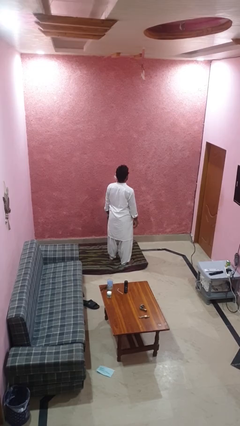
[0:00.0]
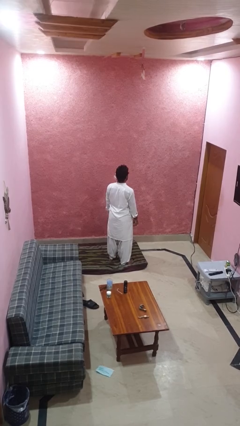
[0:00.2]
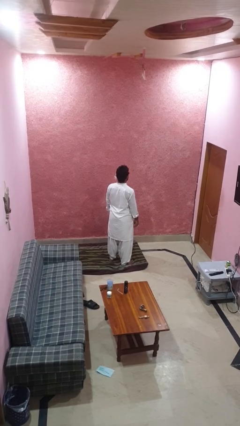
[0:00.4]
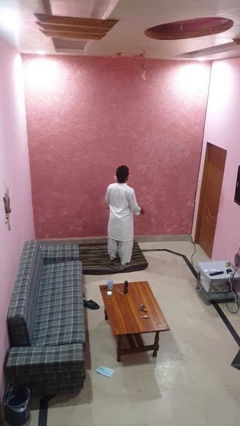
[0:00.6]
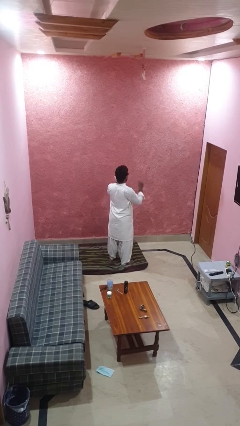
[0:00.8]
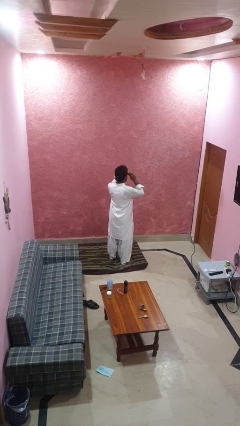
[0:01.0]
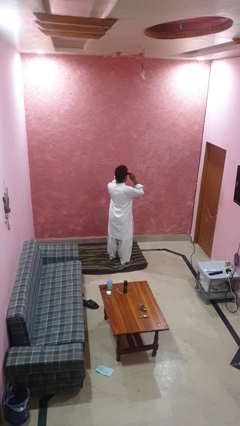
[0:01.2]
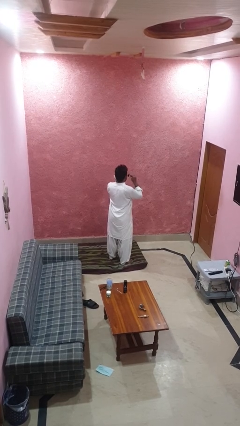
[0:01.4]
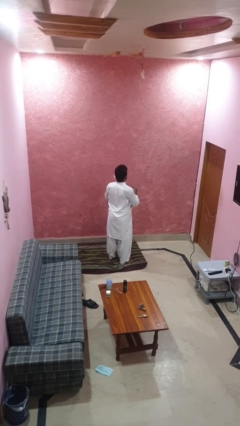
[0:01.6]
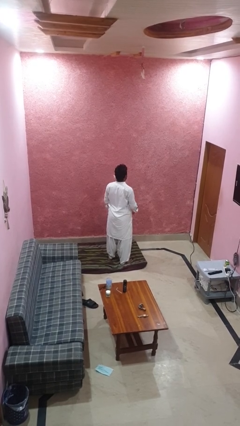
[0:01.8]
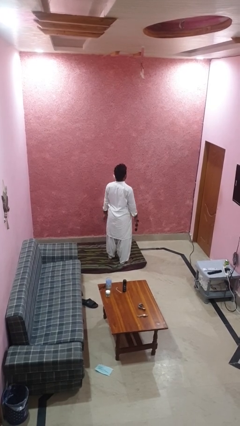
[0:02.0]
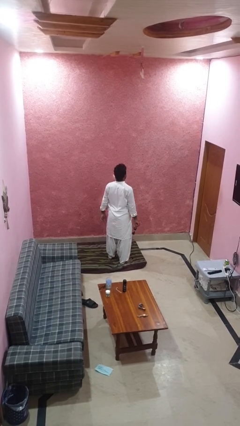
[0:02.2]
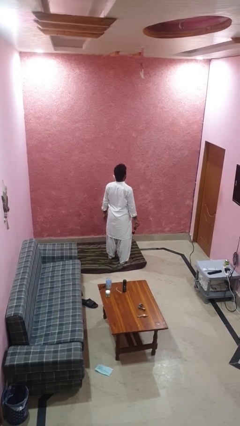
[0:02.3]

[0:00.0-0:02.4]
person takes off sunglasses

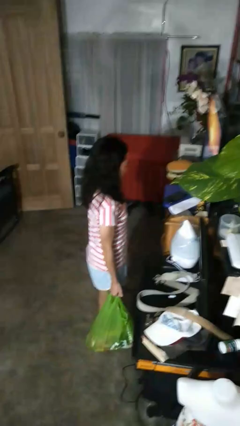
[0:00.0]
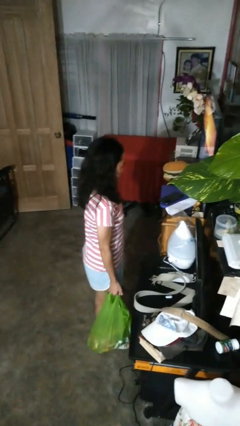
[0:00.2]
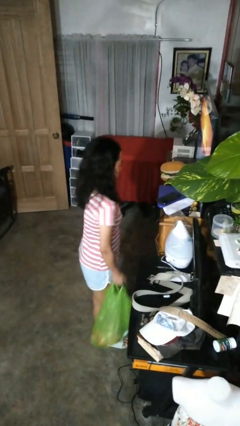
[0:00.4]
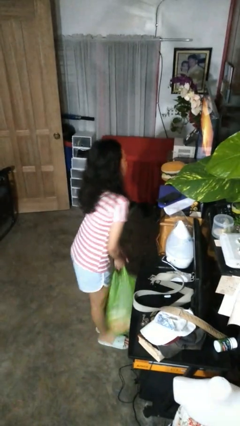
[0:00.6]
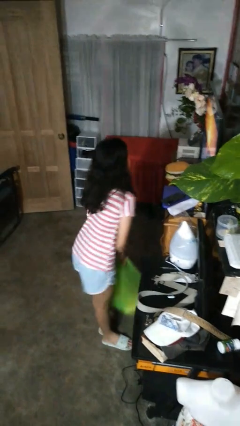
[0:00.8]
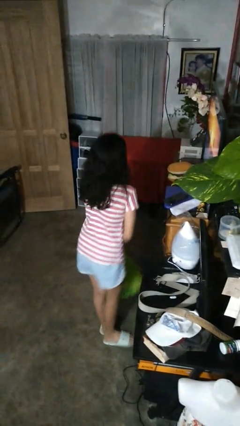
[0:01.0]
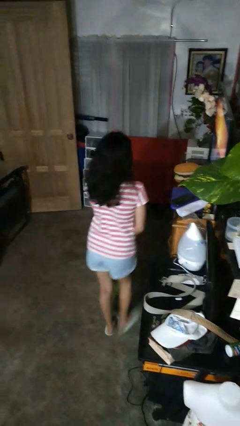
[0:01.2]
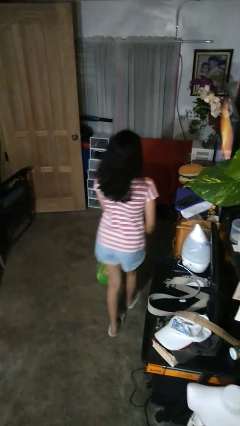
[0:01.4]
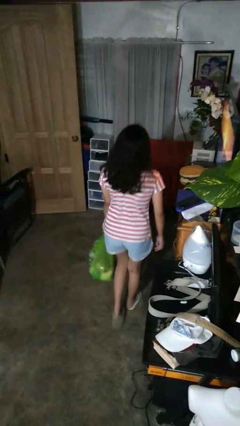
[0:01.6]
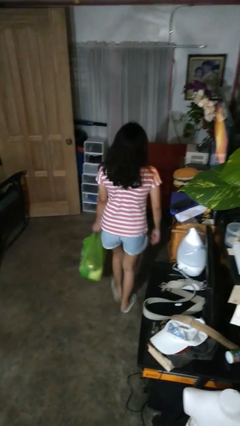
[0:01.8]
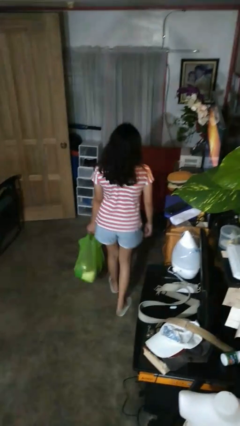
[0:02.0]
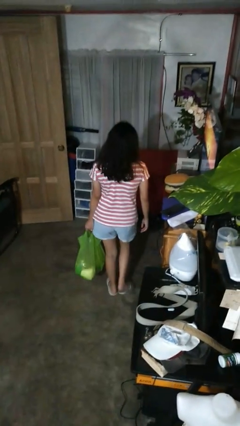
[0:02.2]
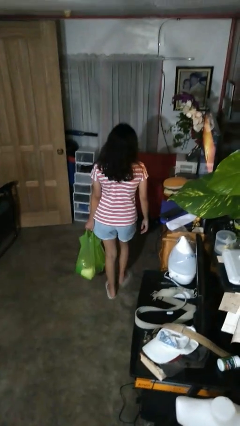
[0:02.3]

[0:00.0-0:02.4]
person carries groceries

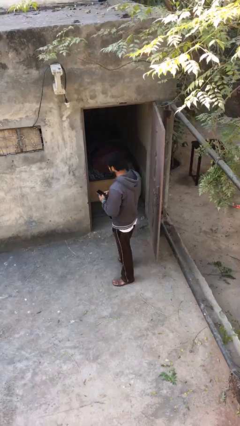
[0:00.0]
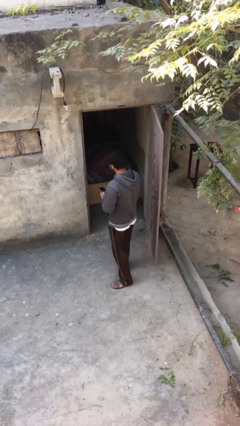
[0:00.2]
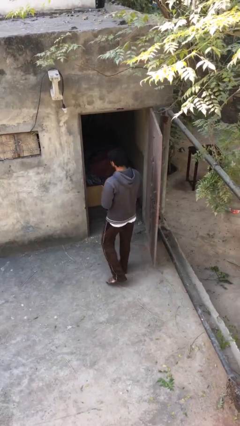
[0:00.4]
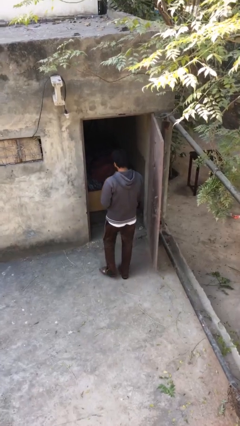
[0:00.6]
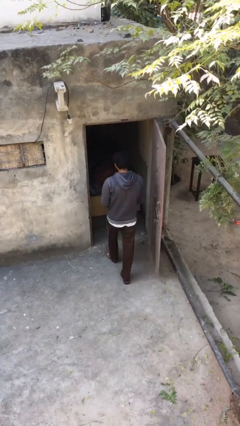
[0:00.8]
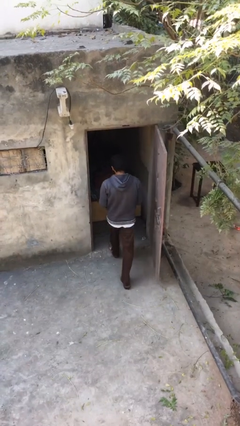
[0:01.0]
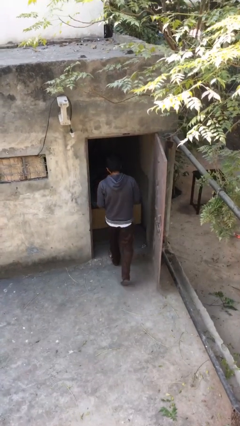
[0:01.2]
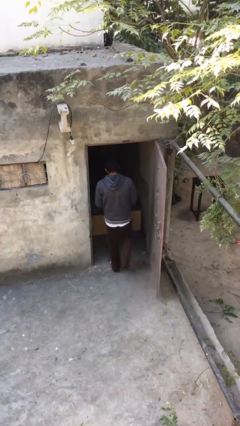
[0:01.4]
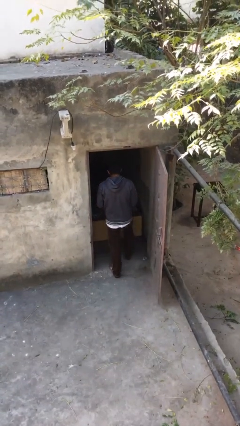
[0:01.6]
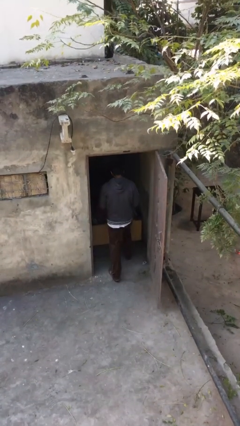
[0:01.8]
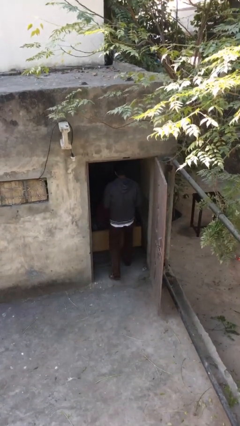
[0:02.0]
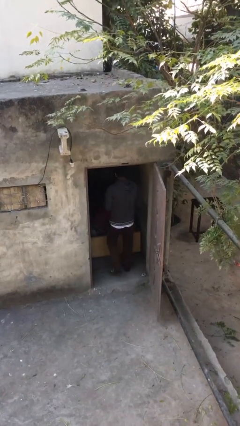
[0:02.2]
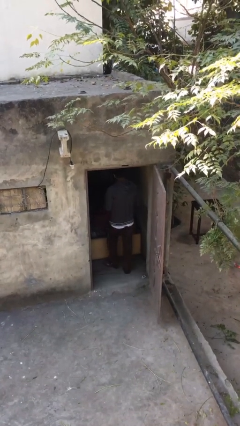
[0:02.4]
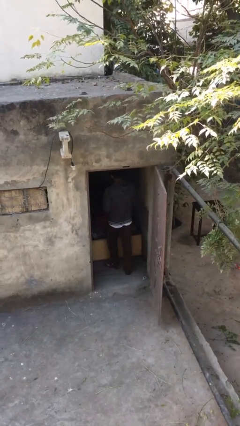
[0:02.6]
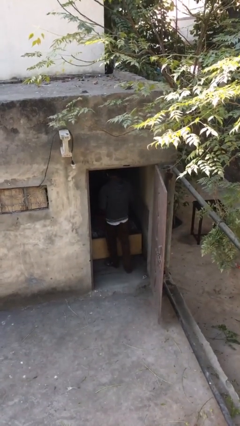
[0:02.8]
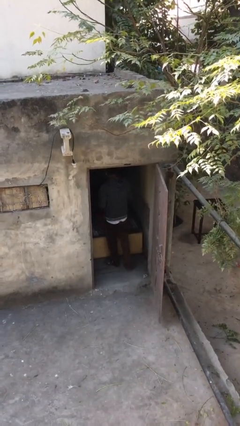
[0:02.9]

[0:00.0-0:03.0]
person exits scene through structure

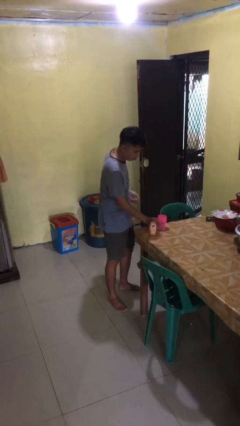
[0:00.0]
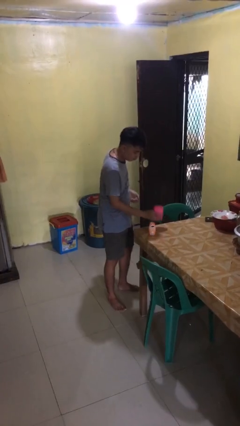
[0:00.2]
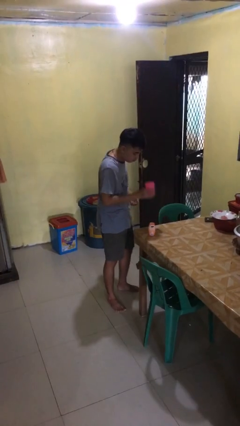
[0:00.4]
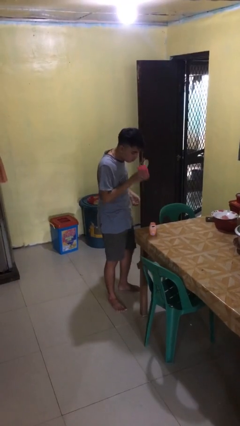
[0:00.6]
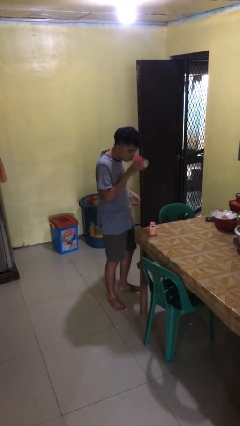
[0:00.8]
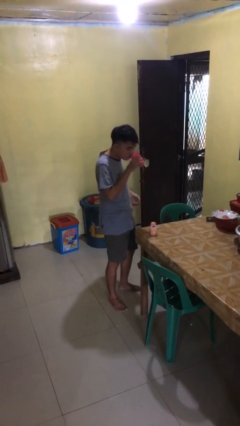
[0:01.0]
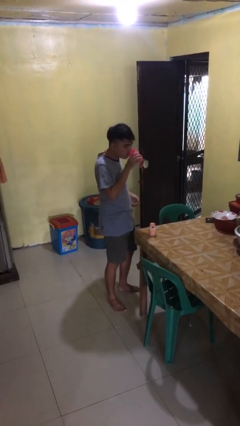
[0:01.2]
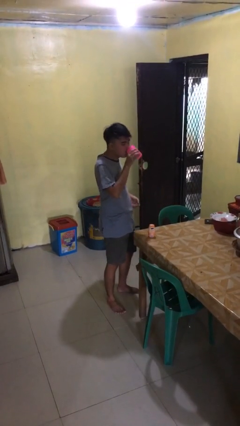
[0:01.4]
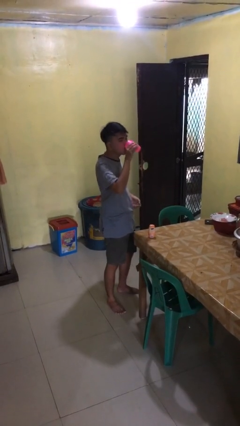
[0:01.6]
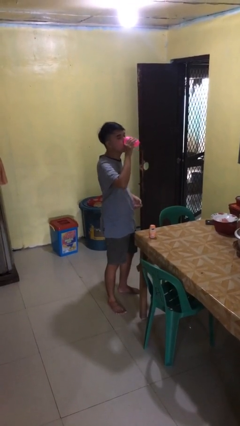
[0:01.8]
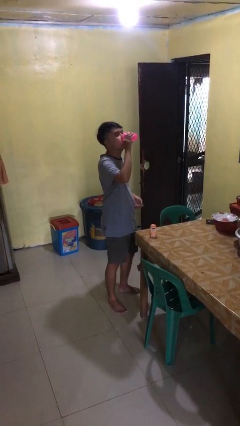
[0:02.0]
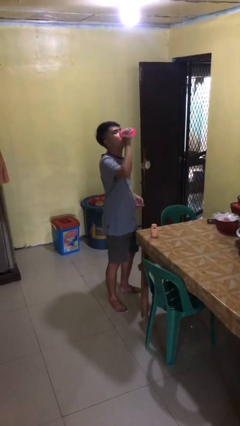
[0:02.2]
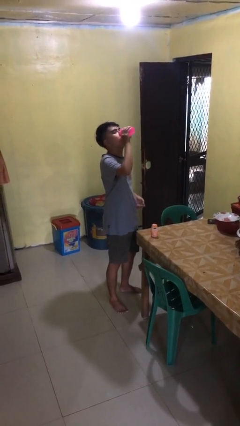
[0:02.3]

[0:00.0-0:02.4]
person drinks from cup

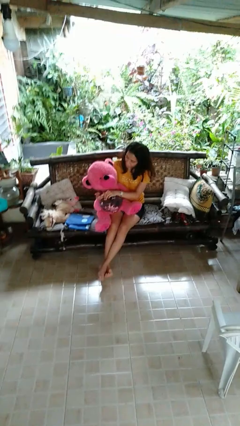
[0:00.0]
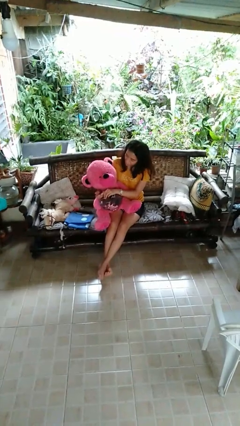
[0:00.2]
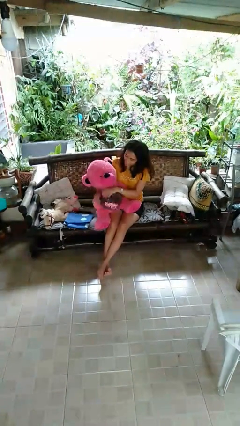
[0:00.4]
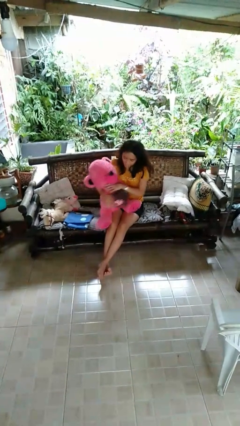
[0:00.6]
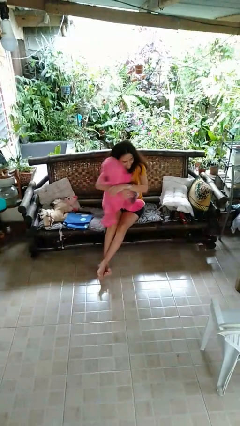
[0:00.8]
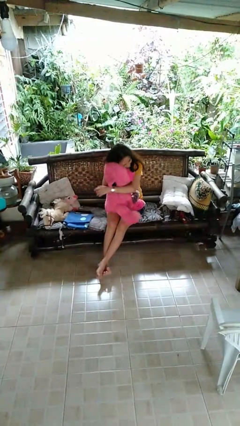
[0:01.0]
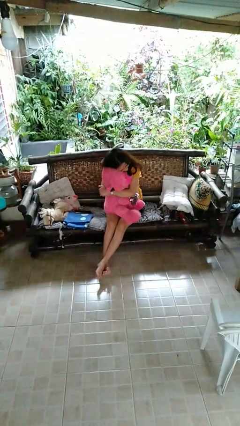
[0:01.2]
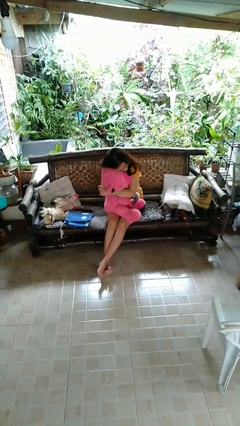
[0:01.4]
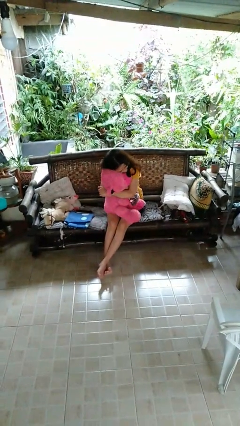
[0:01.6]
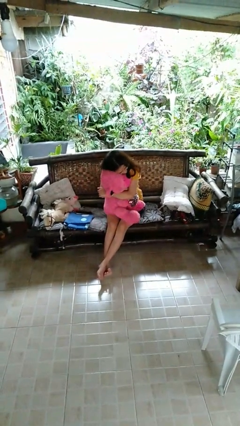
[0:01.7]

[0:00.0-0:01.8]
person hugs stuffed animal

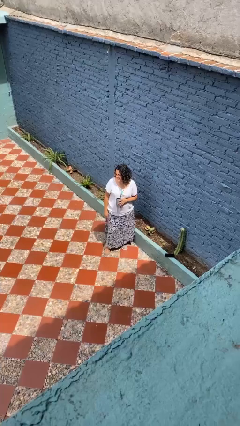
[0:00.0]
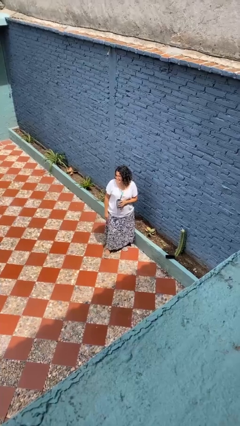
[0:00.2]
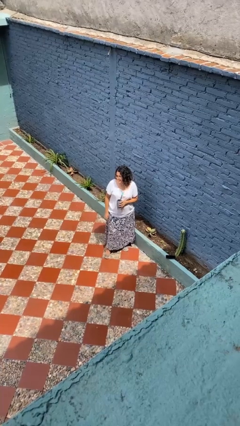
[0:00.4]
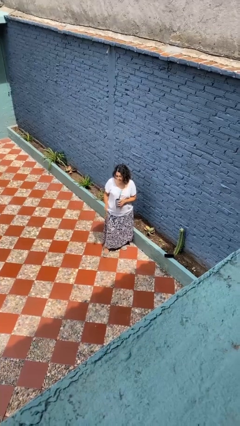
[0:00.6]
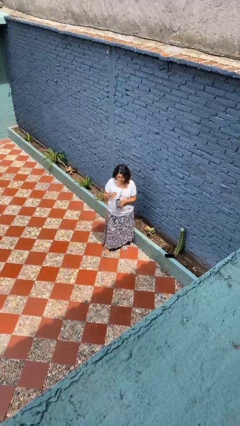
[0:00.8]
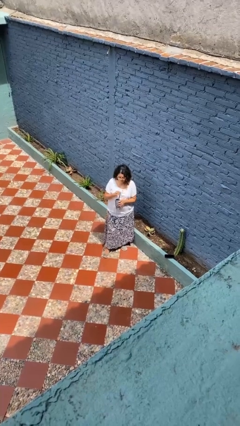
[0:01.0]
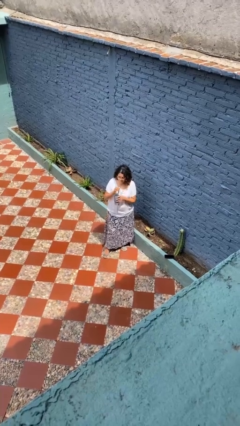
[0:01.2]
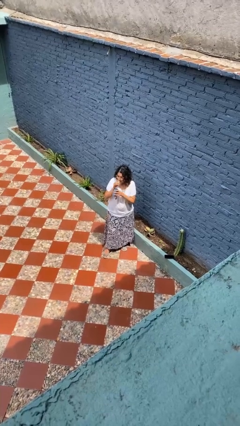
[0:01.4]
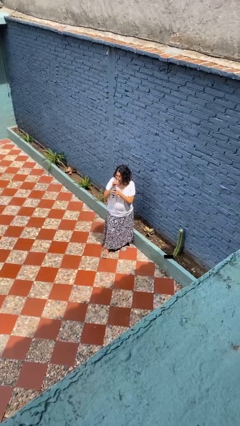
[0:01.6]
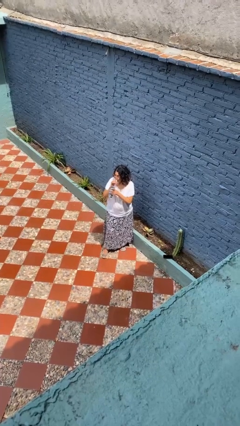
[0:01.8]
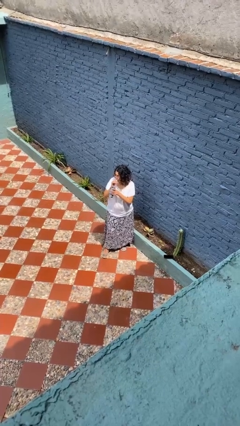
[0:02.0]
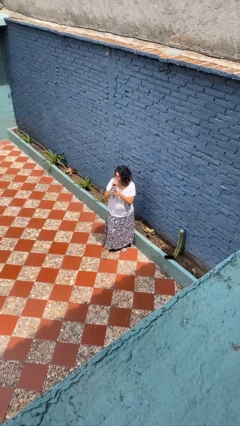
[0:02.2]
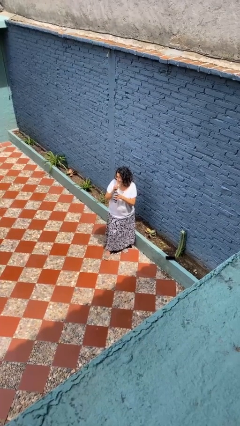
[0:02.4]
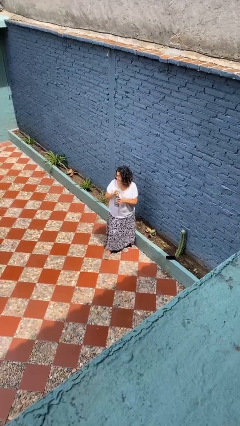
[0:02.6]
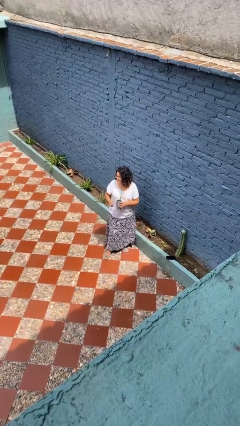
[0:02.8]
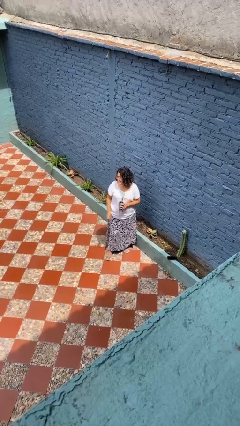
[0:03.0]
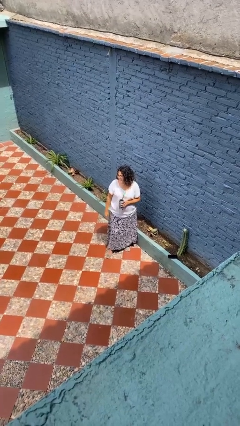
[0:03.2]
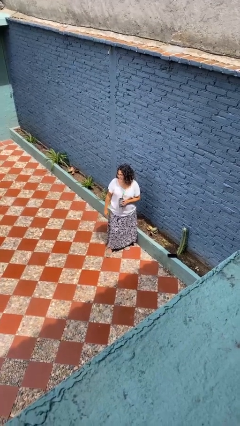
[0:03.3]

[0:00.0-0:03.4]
person drinks from straw

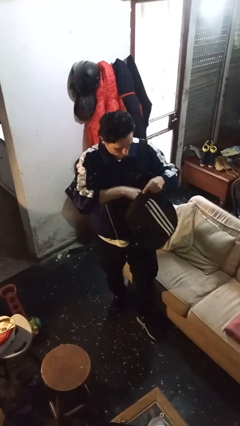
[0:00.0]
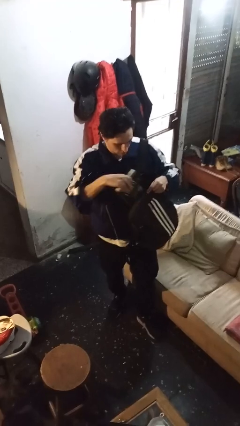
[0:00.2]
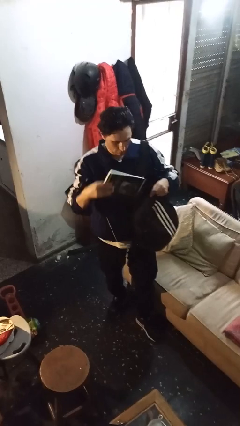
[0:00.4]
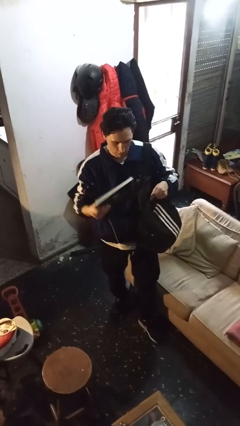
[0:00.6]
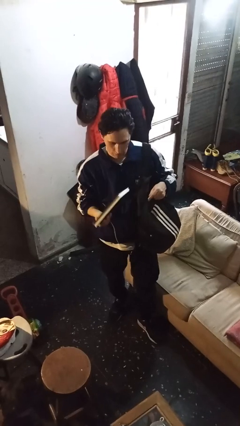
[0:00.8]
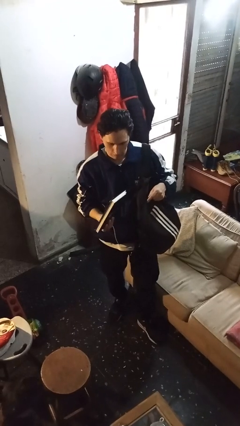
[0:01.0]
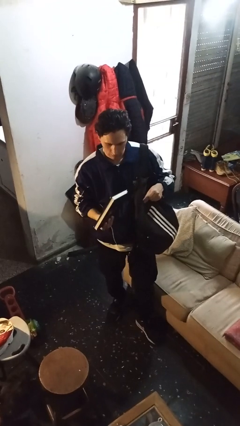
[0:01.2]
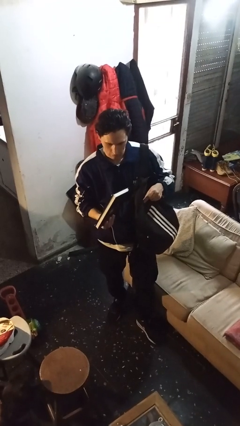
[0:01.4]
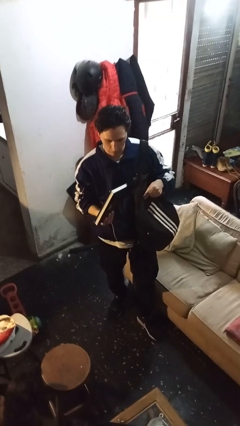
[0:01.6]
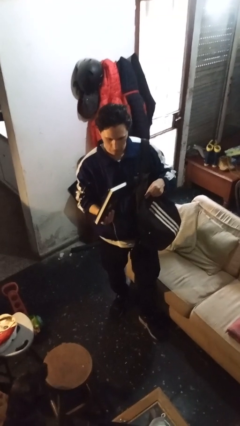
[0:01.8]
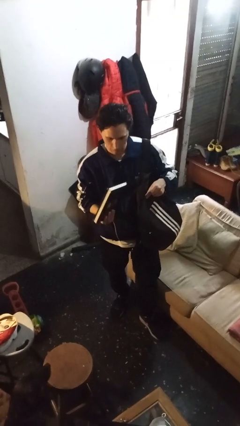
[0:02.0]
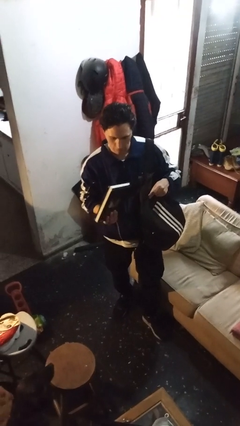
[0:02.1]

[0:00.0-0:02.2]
person takes object from backpack
